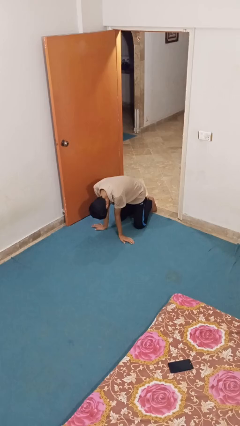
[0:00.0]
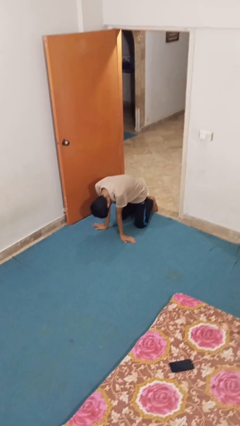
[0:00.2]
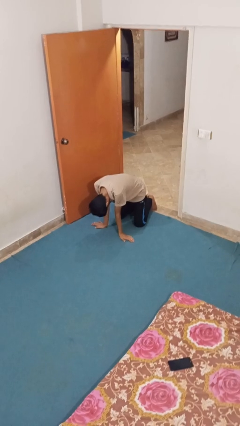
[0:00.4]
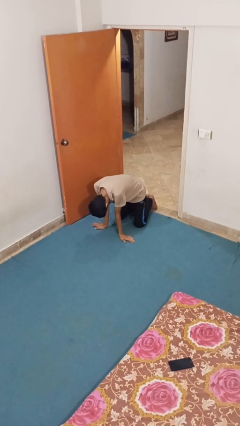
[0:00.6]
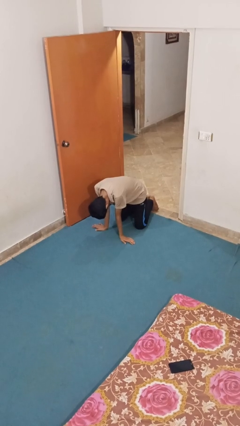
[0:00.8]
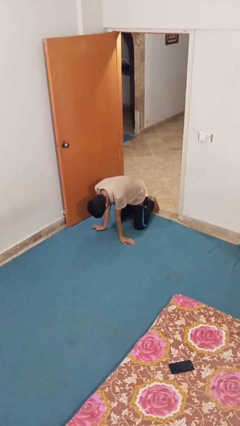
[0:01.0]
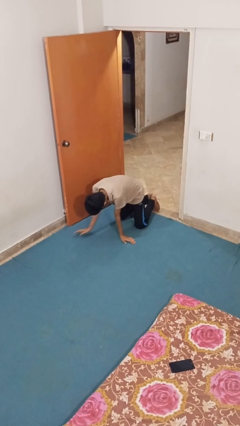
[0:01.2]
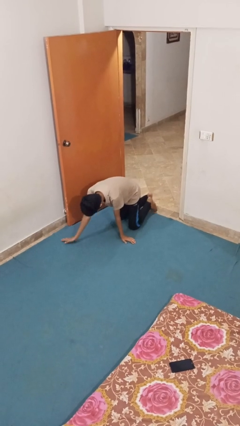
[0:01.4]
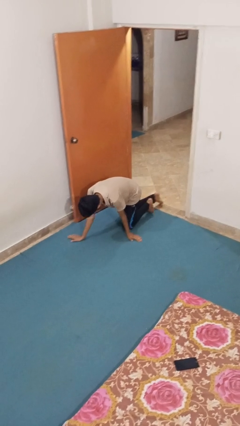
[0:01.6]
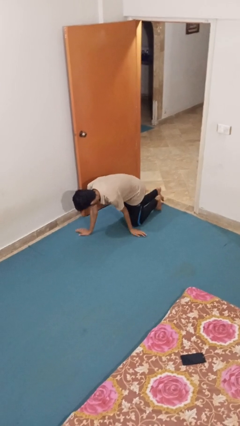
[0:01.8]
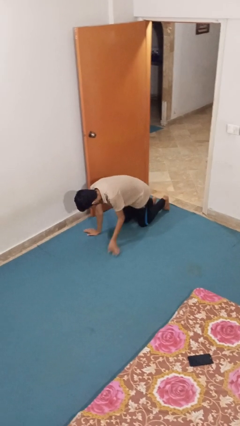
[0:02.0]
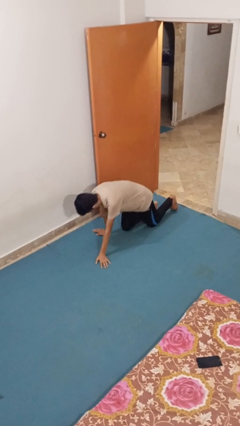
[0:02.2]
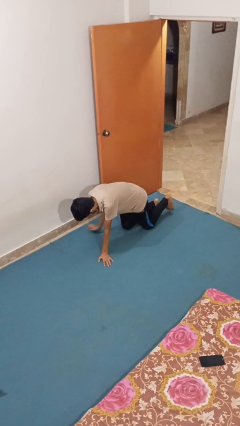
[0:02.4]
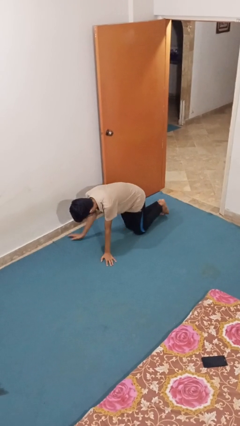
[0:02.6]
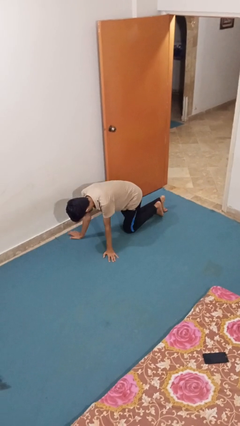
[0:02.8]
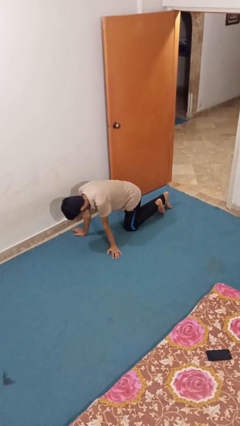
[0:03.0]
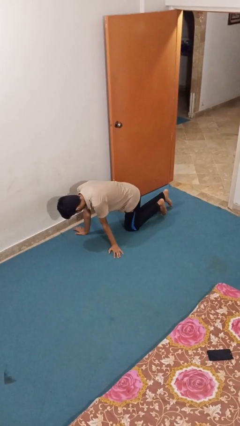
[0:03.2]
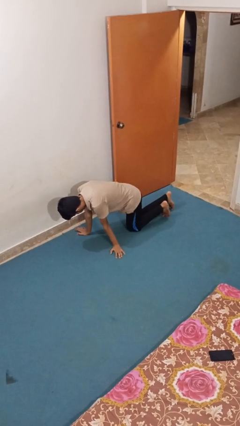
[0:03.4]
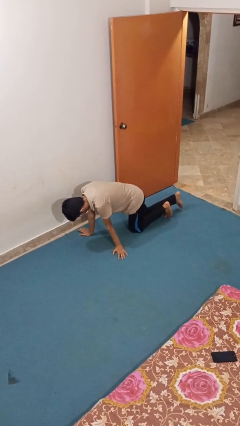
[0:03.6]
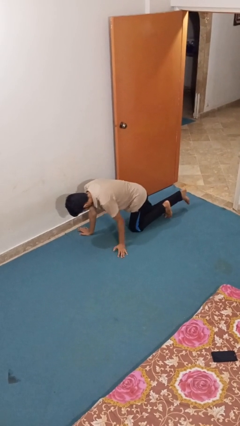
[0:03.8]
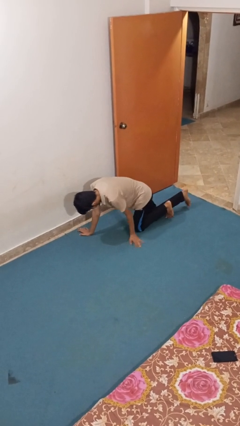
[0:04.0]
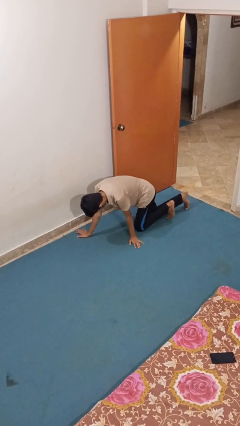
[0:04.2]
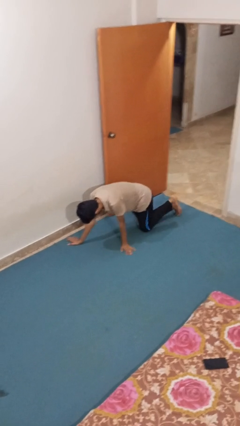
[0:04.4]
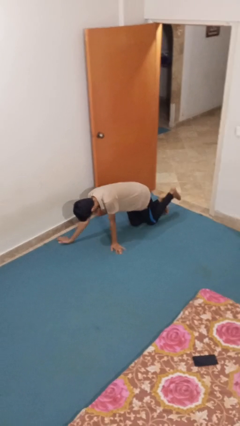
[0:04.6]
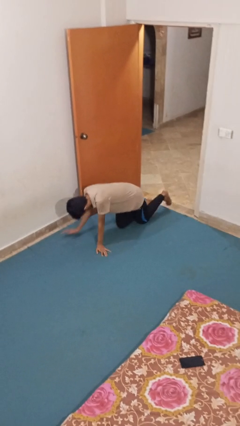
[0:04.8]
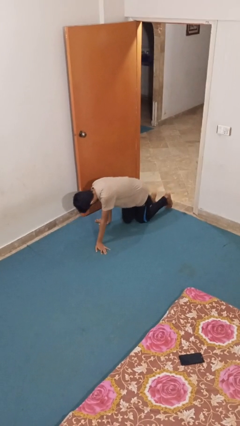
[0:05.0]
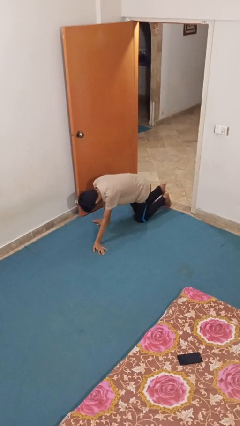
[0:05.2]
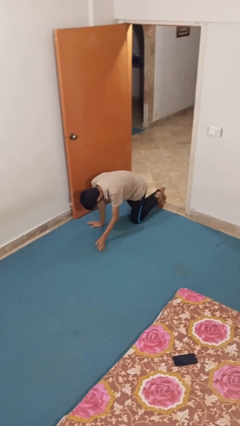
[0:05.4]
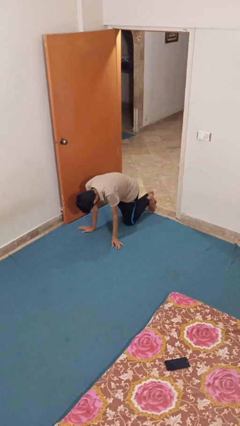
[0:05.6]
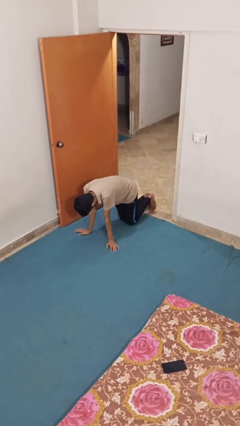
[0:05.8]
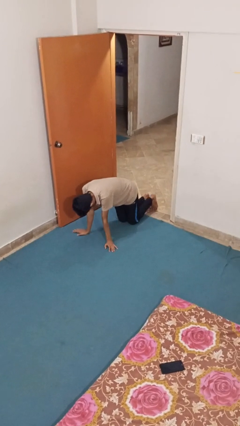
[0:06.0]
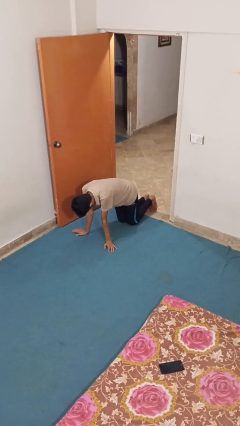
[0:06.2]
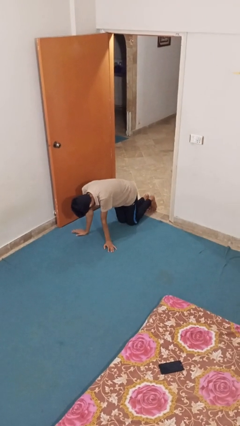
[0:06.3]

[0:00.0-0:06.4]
person crawls

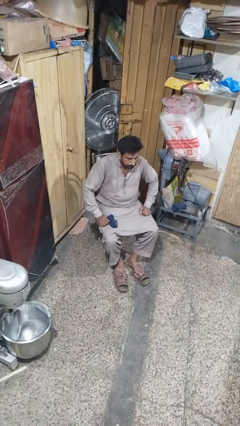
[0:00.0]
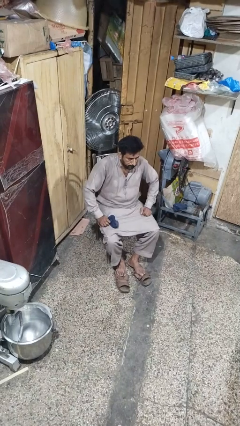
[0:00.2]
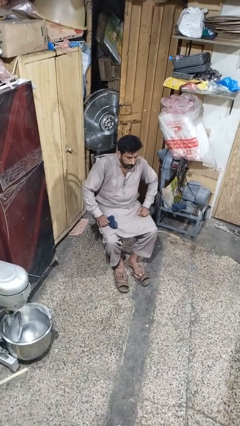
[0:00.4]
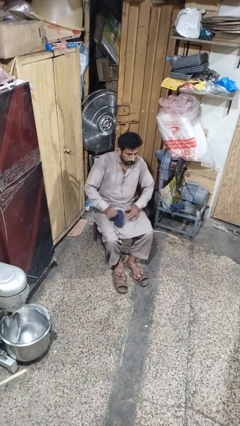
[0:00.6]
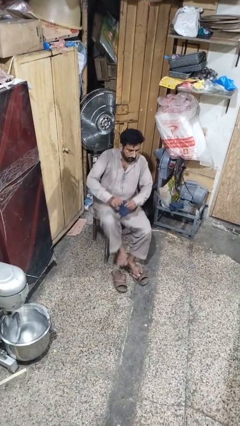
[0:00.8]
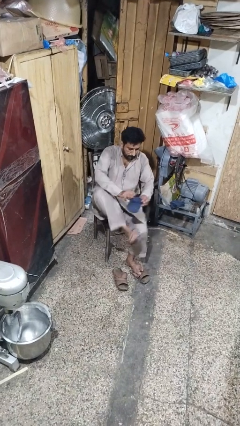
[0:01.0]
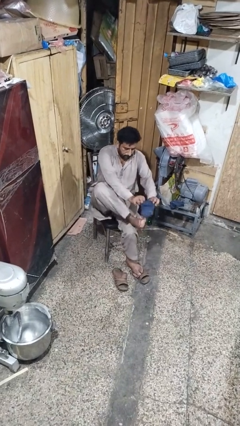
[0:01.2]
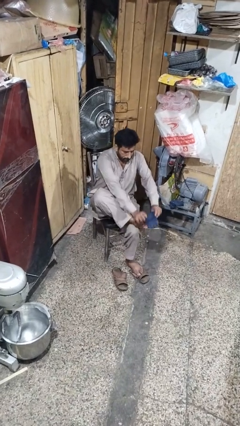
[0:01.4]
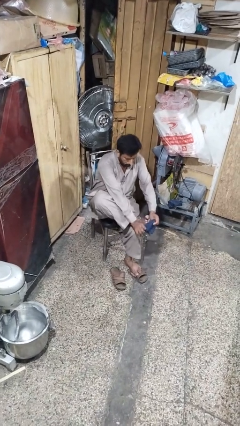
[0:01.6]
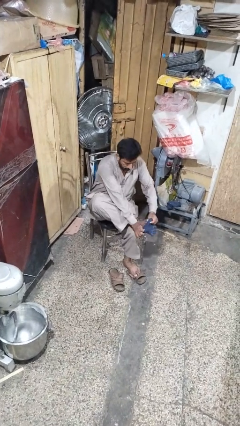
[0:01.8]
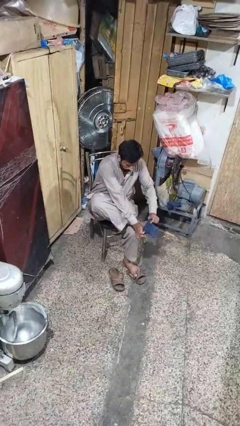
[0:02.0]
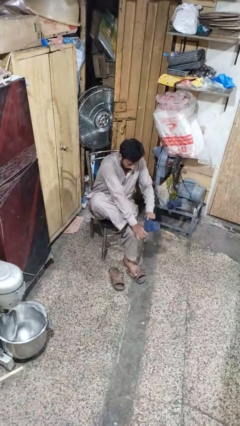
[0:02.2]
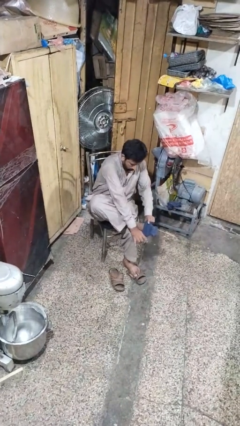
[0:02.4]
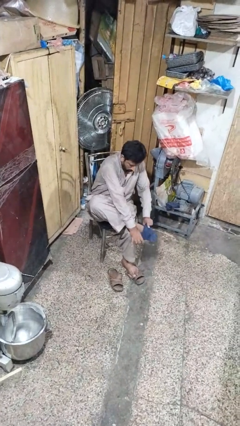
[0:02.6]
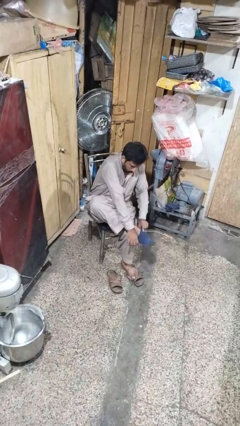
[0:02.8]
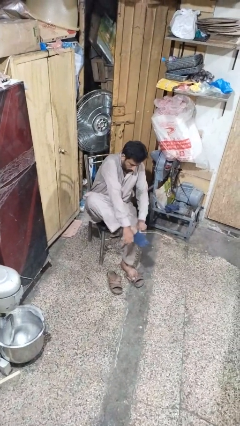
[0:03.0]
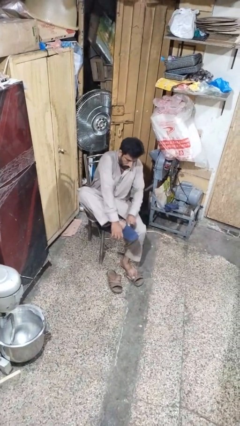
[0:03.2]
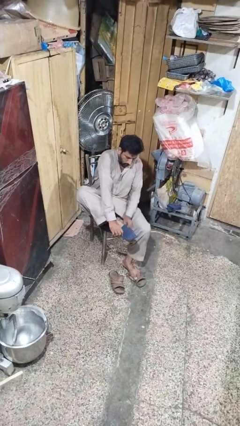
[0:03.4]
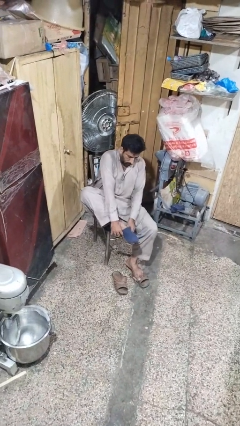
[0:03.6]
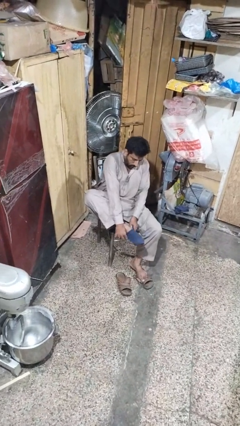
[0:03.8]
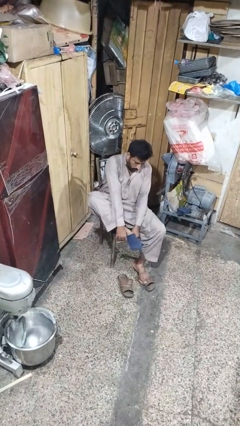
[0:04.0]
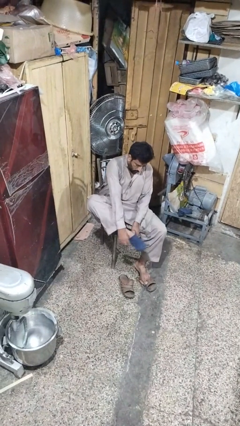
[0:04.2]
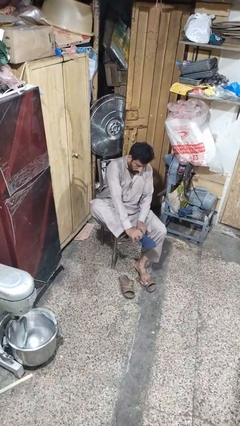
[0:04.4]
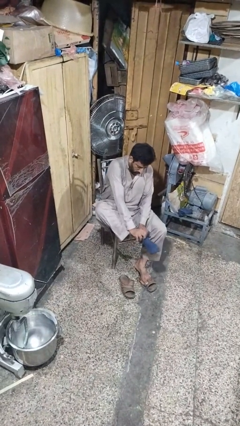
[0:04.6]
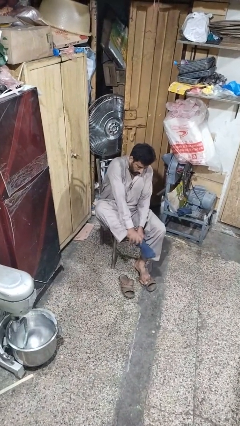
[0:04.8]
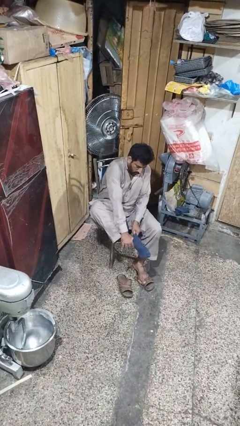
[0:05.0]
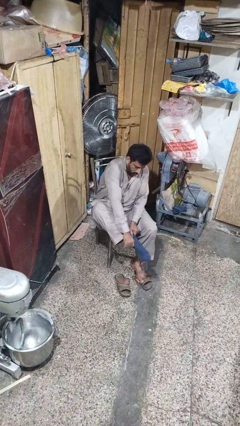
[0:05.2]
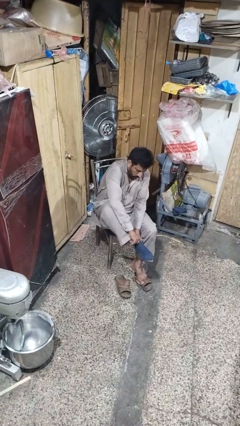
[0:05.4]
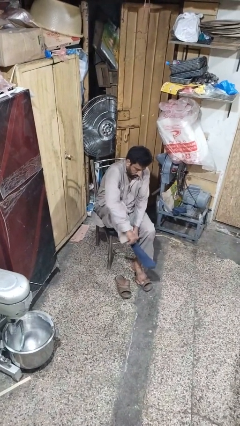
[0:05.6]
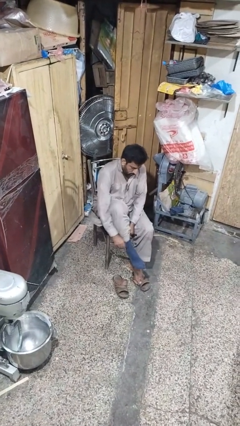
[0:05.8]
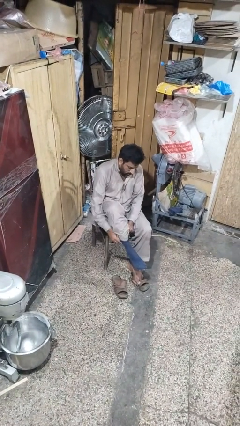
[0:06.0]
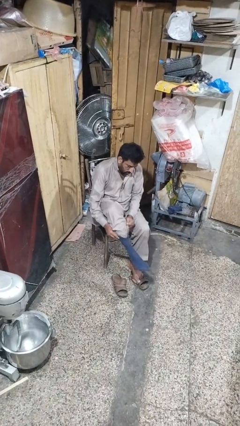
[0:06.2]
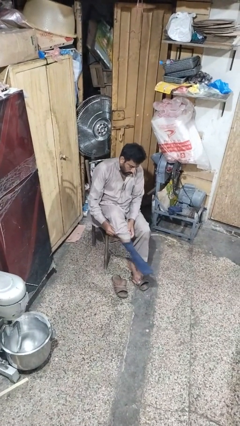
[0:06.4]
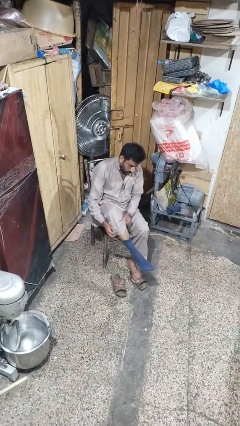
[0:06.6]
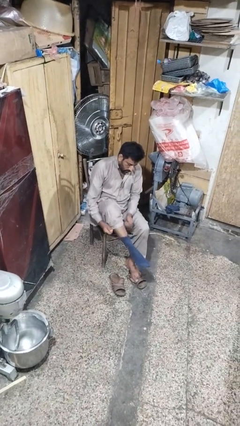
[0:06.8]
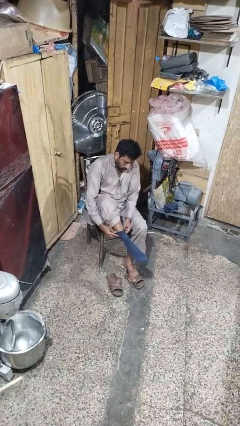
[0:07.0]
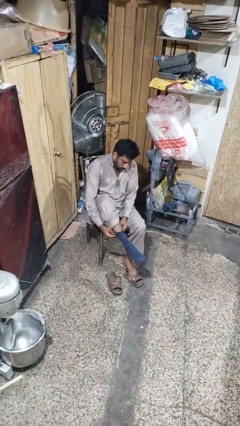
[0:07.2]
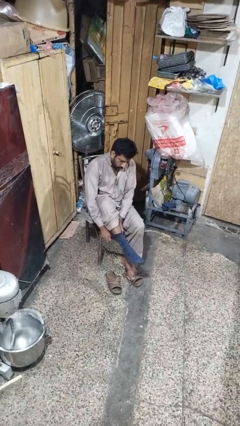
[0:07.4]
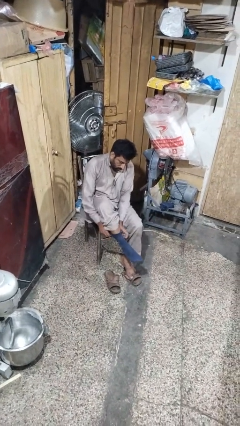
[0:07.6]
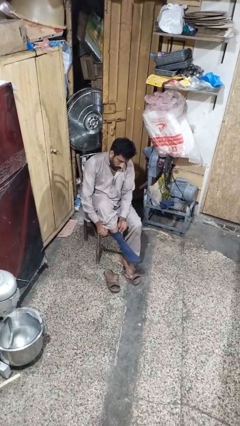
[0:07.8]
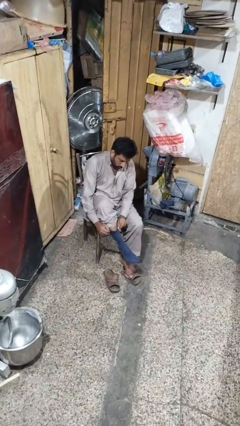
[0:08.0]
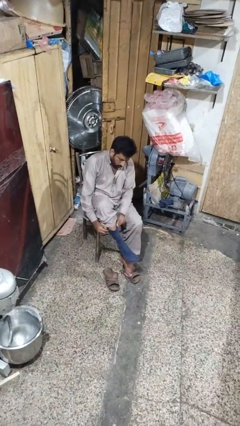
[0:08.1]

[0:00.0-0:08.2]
person puts on socks

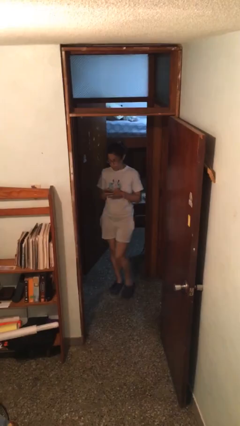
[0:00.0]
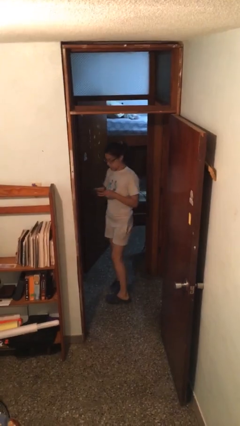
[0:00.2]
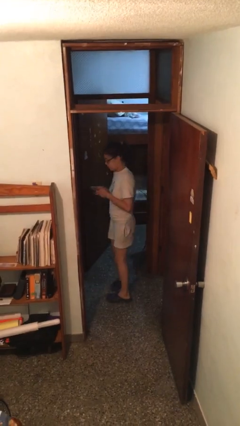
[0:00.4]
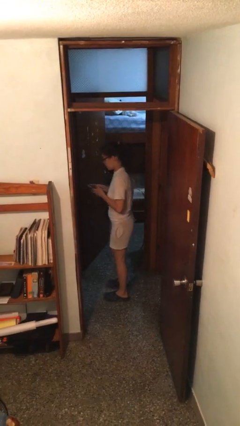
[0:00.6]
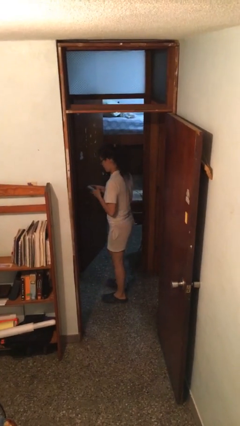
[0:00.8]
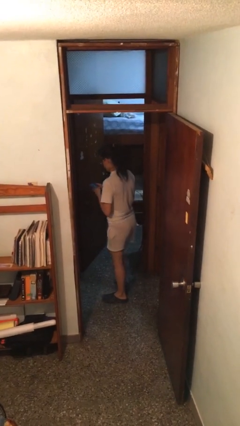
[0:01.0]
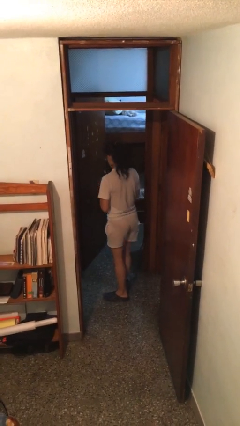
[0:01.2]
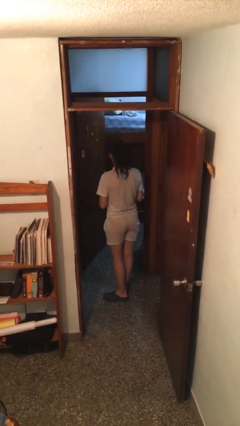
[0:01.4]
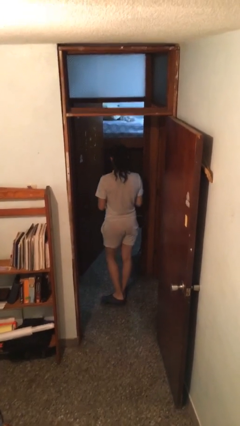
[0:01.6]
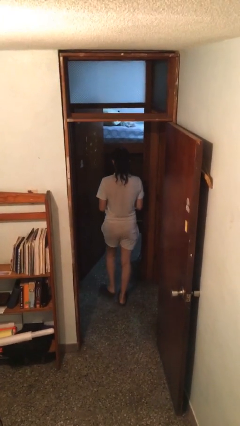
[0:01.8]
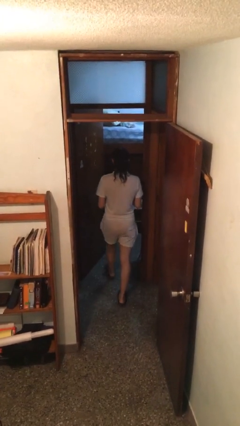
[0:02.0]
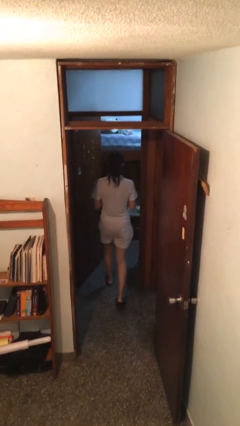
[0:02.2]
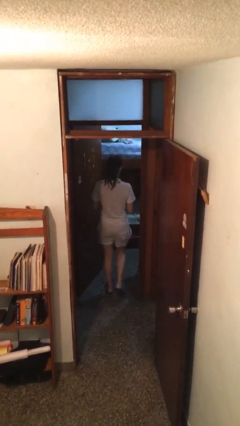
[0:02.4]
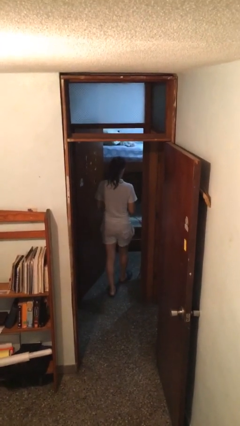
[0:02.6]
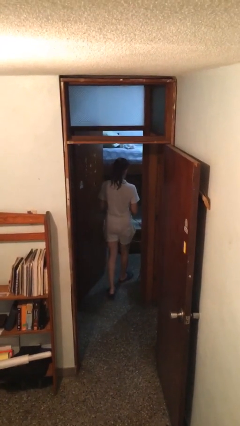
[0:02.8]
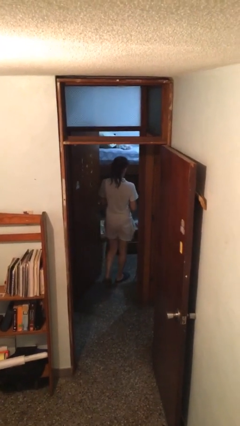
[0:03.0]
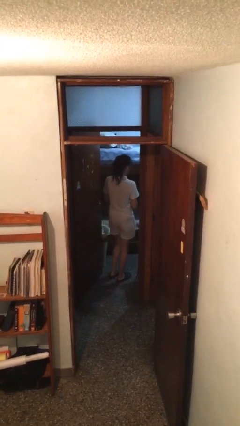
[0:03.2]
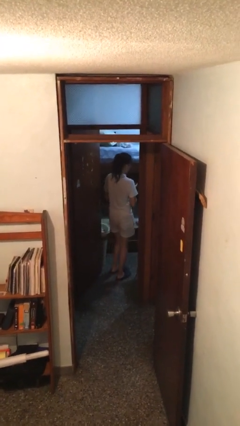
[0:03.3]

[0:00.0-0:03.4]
person exits scene through structure
